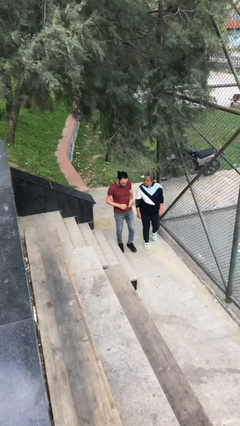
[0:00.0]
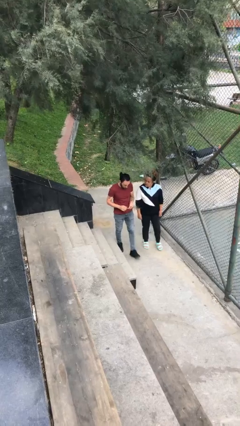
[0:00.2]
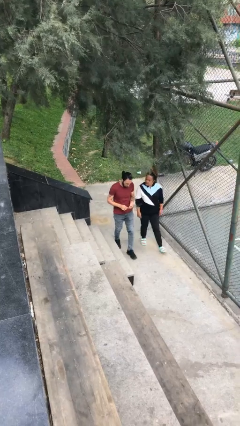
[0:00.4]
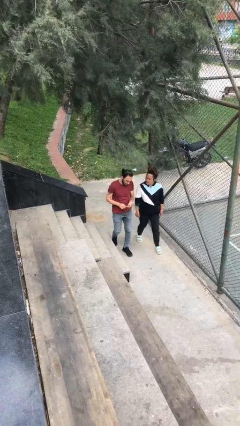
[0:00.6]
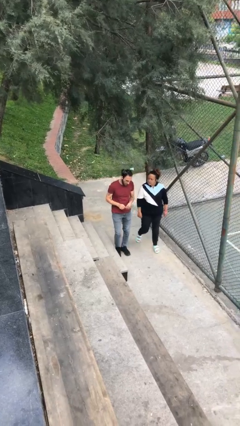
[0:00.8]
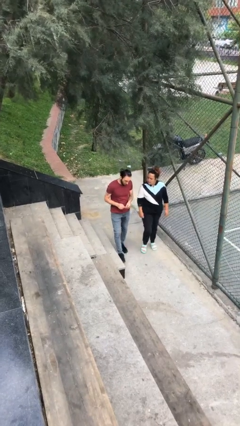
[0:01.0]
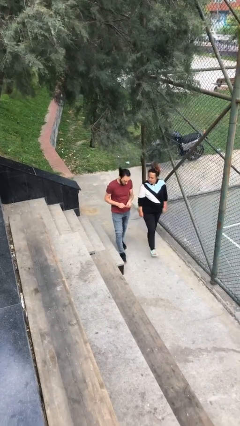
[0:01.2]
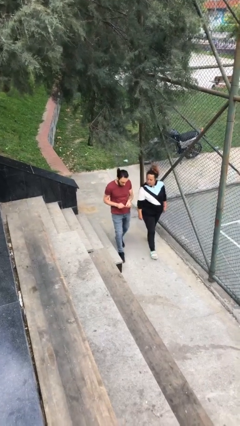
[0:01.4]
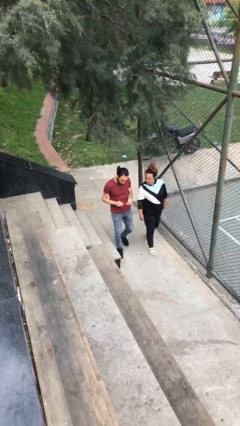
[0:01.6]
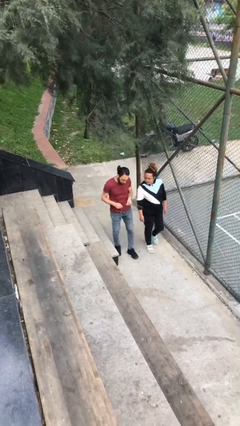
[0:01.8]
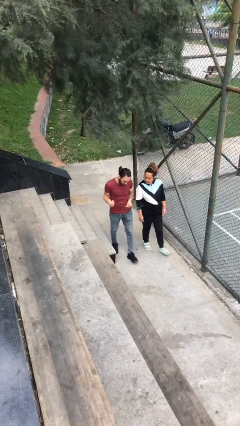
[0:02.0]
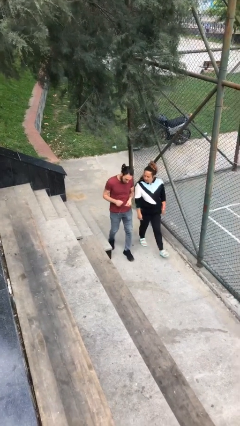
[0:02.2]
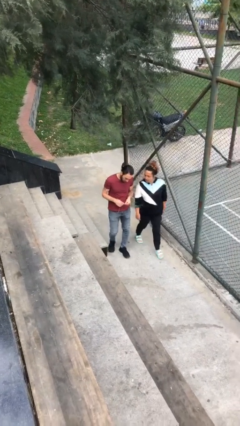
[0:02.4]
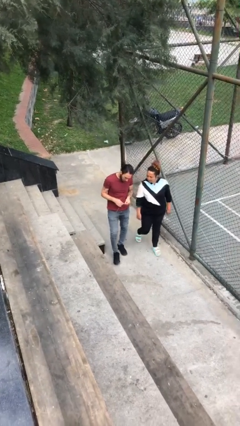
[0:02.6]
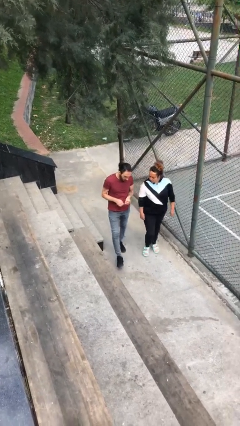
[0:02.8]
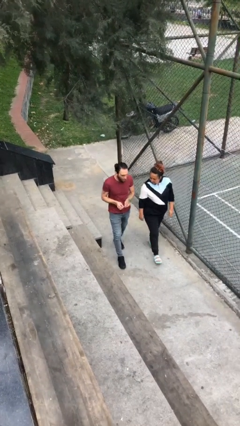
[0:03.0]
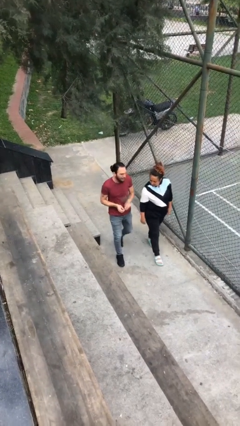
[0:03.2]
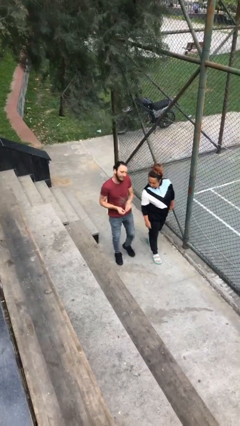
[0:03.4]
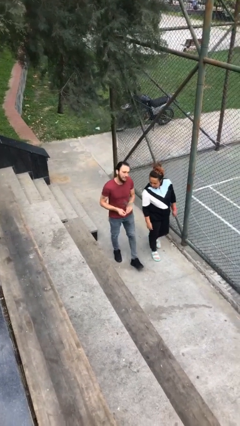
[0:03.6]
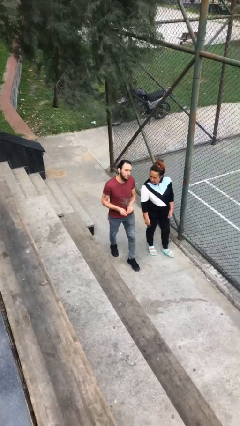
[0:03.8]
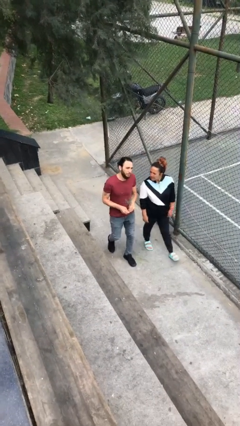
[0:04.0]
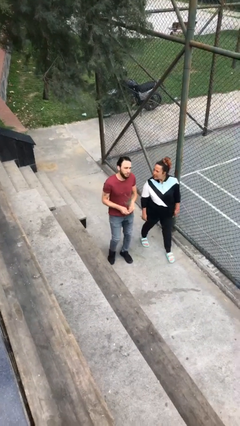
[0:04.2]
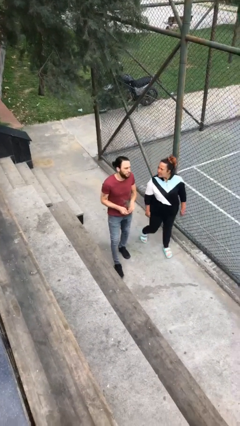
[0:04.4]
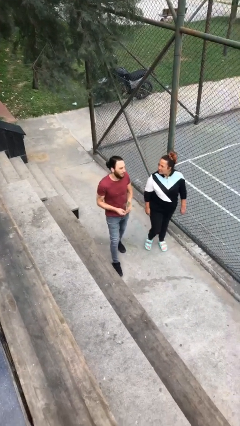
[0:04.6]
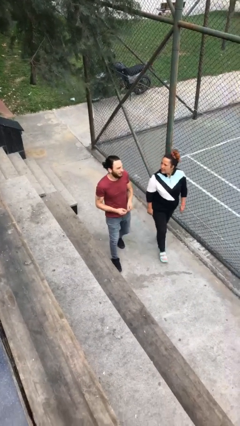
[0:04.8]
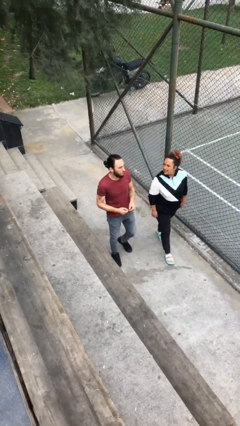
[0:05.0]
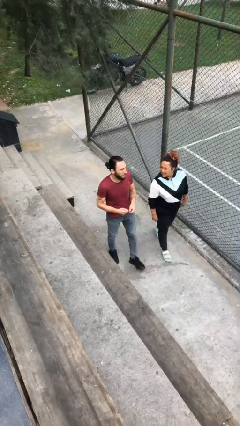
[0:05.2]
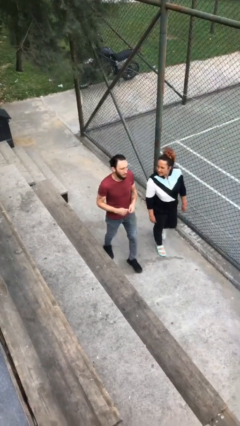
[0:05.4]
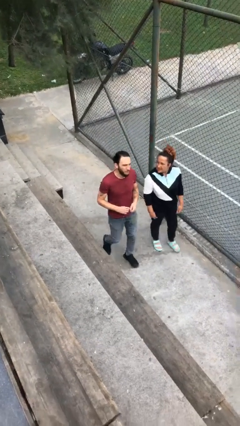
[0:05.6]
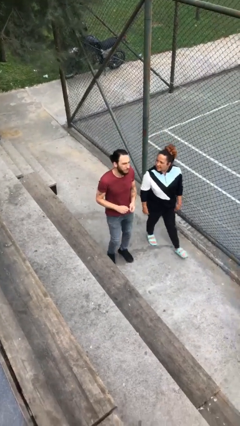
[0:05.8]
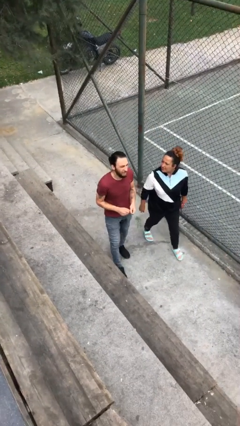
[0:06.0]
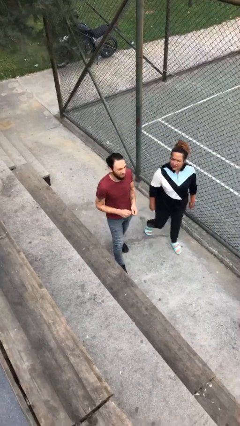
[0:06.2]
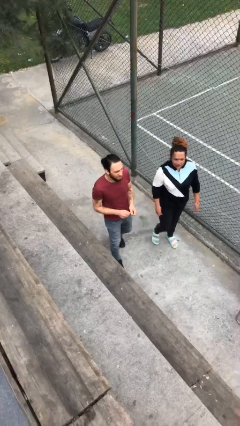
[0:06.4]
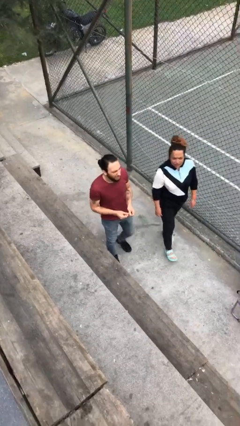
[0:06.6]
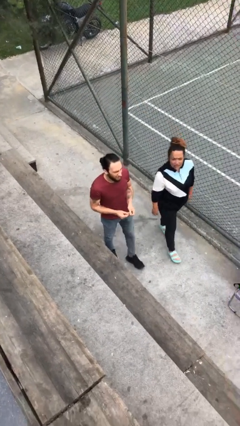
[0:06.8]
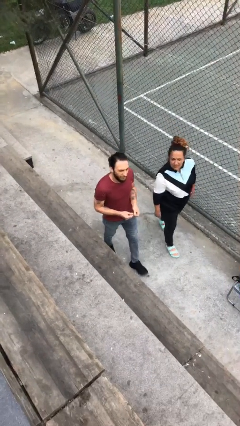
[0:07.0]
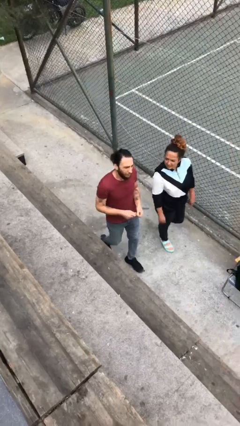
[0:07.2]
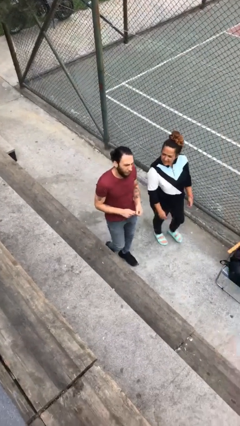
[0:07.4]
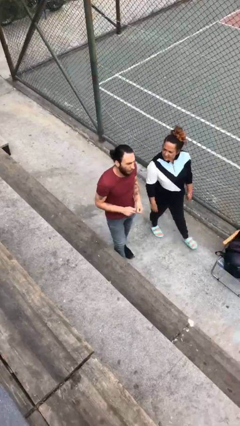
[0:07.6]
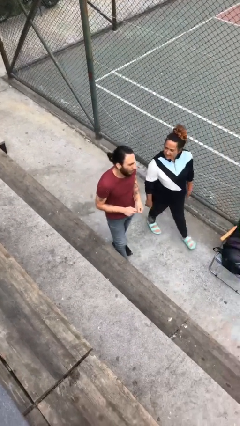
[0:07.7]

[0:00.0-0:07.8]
person talks to person

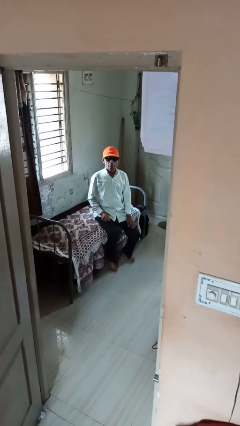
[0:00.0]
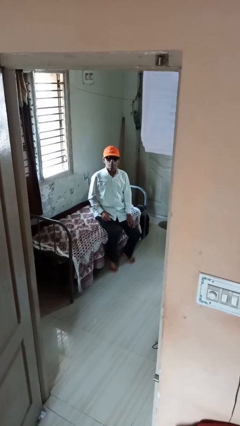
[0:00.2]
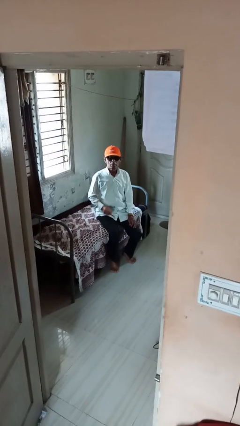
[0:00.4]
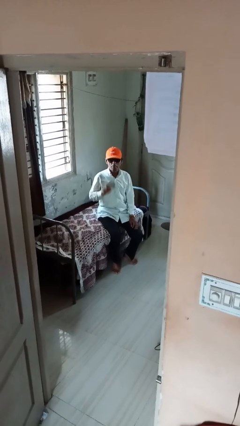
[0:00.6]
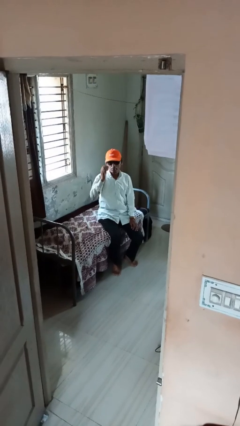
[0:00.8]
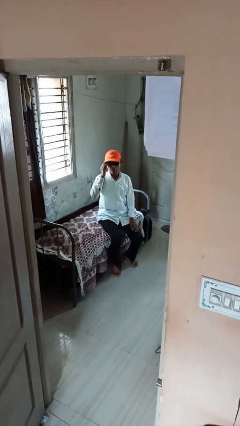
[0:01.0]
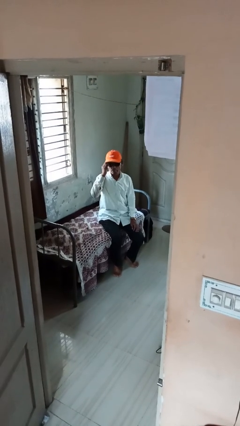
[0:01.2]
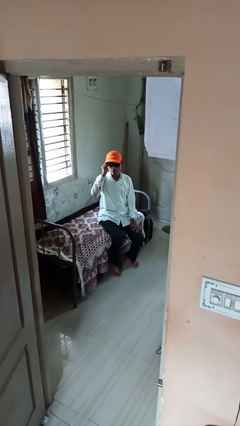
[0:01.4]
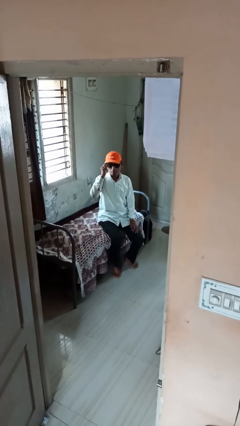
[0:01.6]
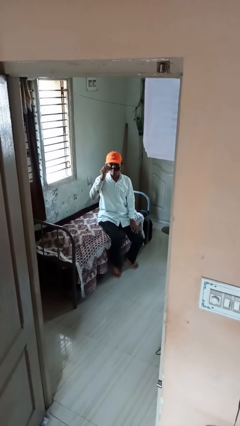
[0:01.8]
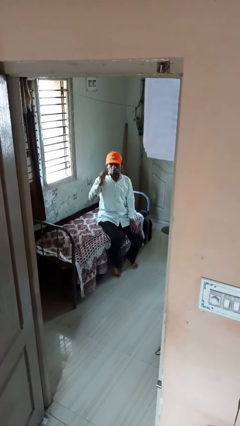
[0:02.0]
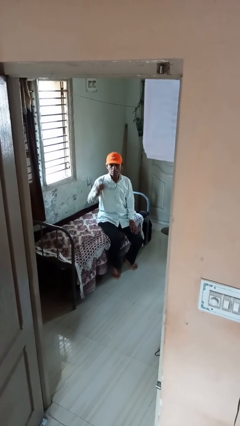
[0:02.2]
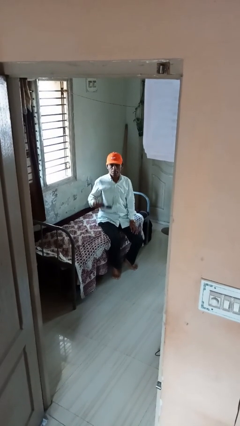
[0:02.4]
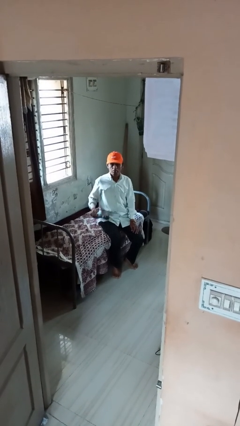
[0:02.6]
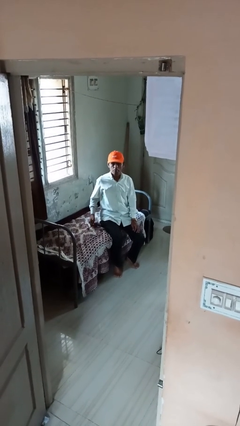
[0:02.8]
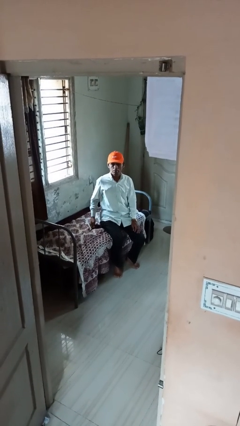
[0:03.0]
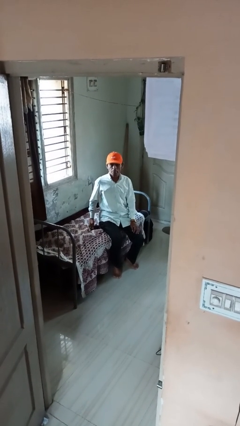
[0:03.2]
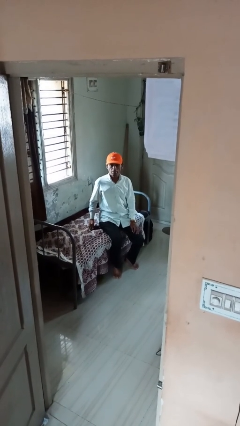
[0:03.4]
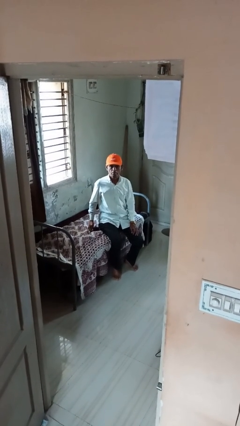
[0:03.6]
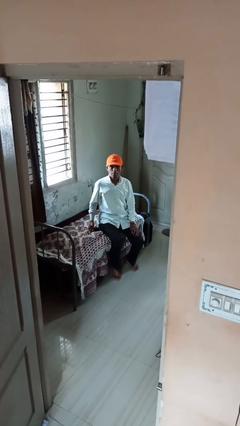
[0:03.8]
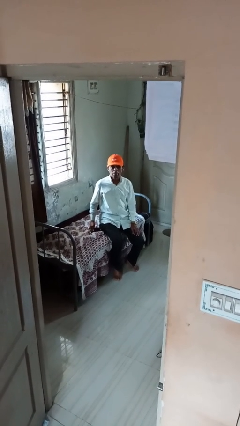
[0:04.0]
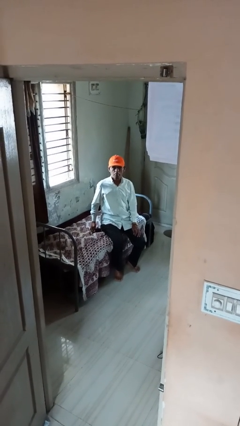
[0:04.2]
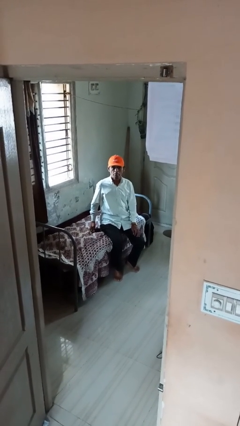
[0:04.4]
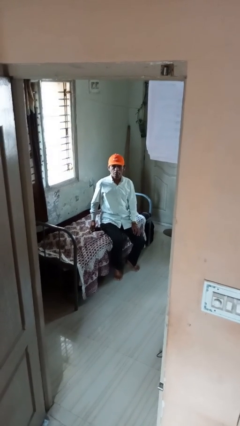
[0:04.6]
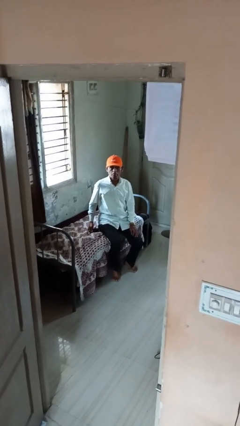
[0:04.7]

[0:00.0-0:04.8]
person takes off sunglasses

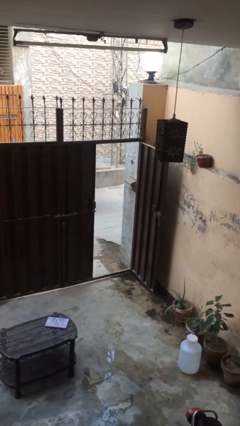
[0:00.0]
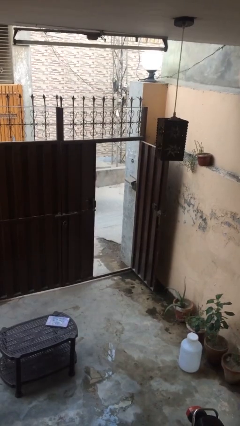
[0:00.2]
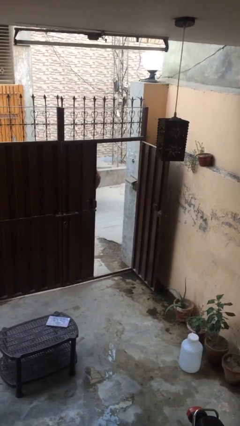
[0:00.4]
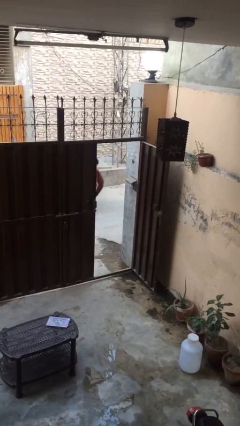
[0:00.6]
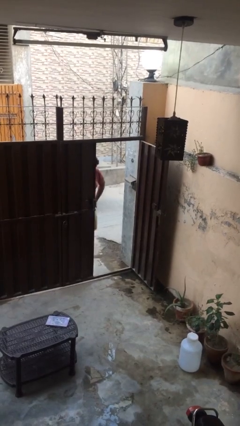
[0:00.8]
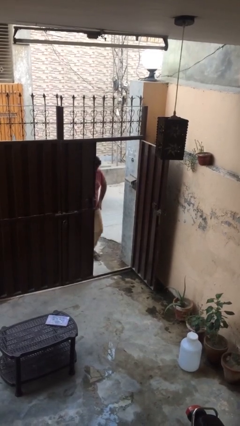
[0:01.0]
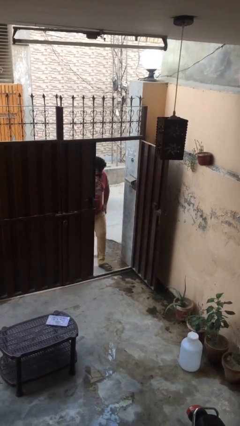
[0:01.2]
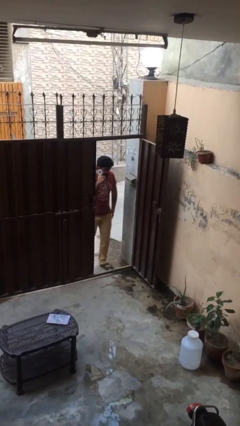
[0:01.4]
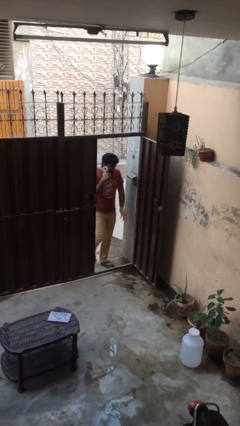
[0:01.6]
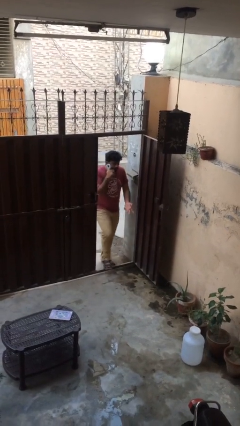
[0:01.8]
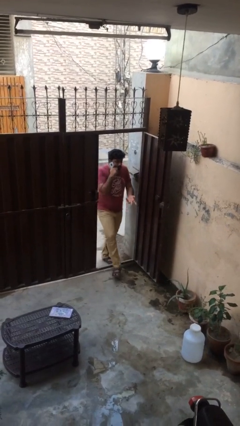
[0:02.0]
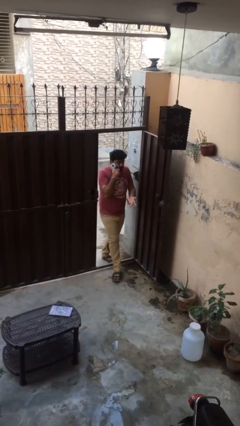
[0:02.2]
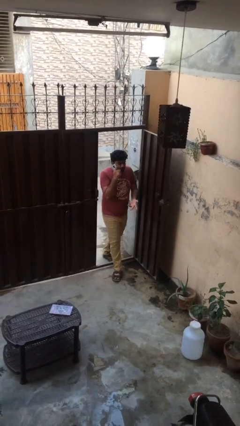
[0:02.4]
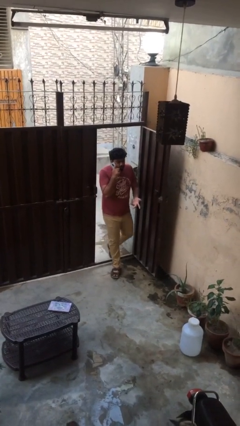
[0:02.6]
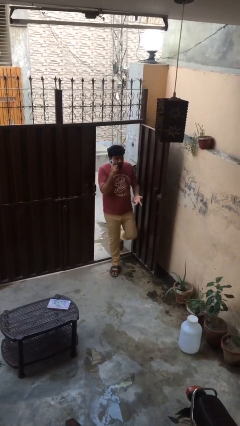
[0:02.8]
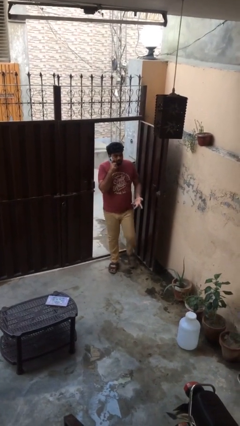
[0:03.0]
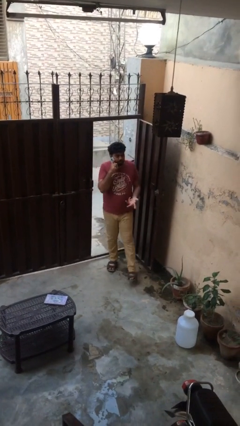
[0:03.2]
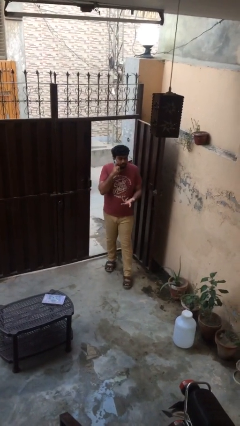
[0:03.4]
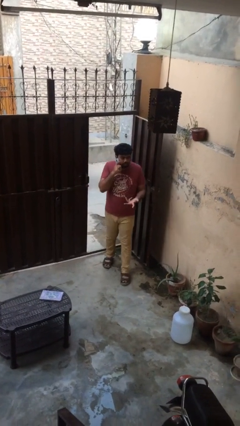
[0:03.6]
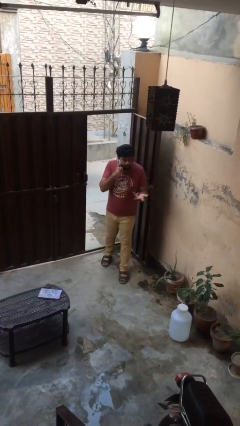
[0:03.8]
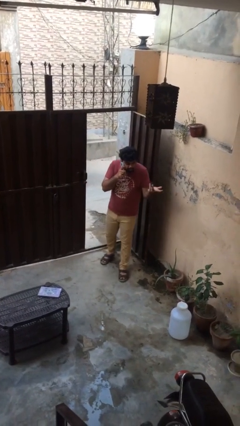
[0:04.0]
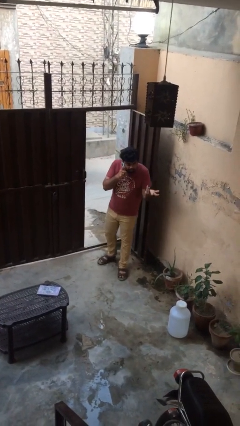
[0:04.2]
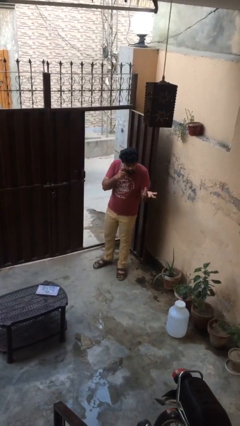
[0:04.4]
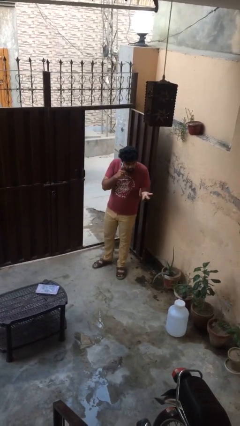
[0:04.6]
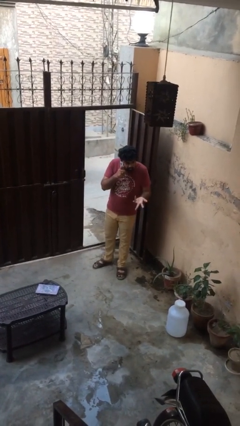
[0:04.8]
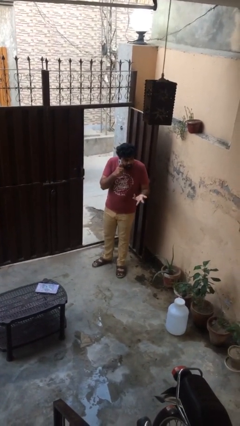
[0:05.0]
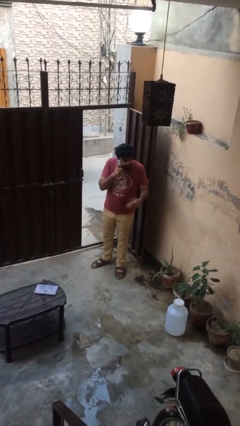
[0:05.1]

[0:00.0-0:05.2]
person enters scene through structure

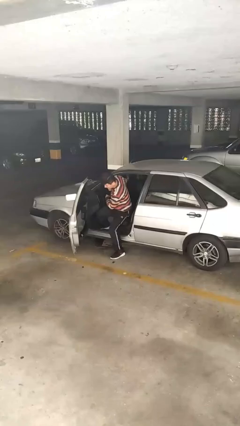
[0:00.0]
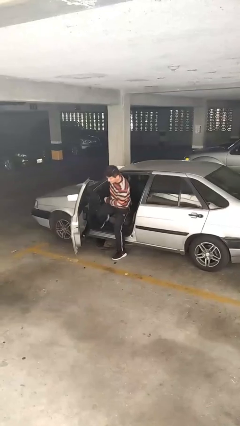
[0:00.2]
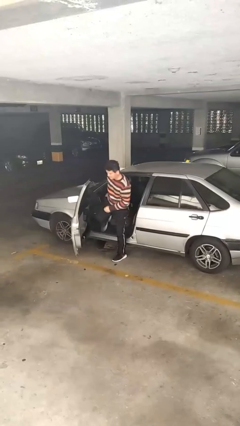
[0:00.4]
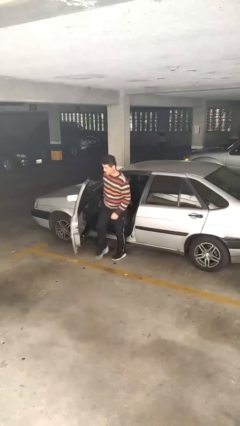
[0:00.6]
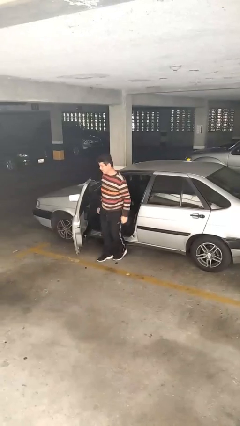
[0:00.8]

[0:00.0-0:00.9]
person exits car
